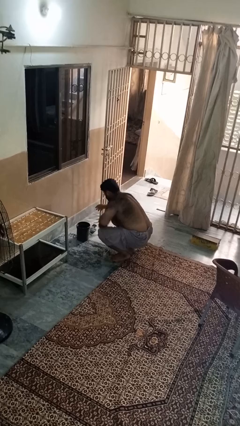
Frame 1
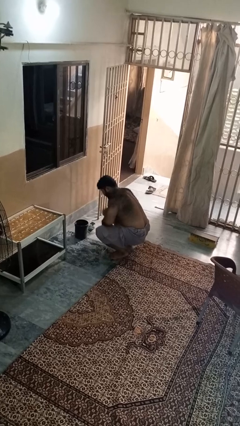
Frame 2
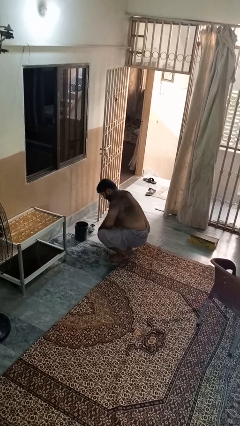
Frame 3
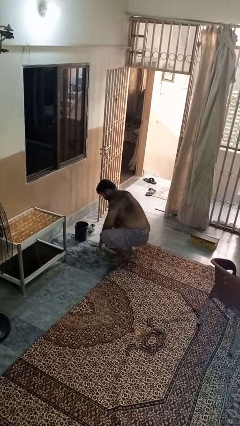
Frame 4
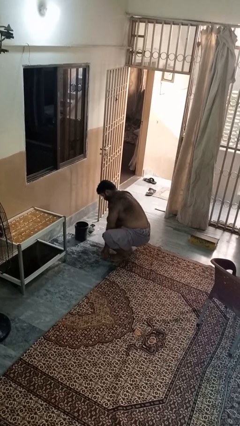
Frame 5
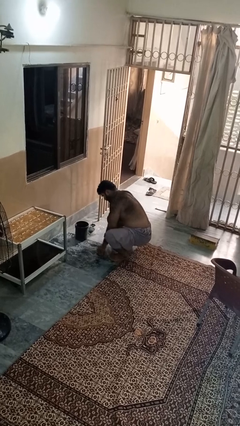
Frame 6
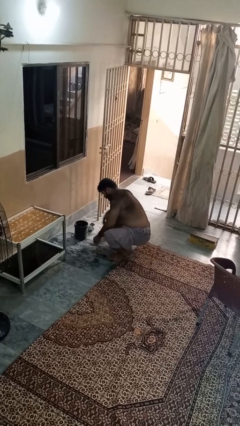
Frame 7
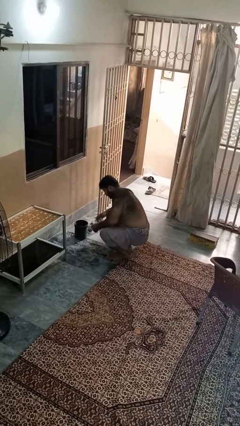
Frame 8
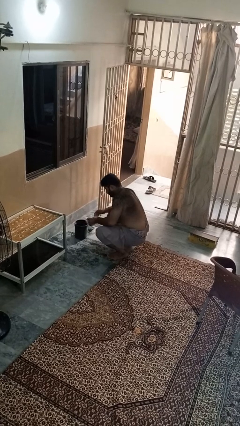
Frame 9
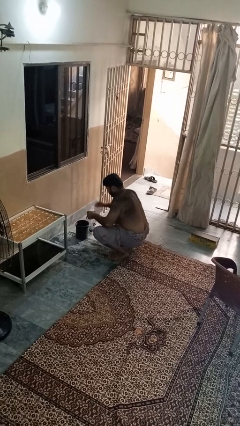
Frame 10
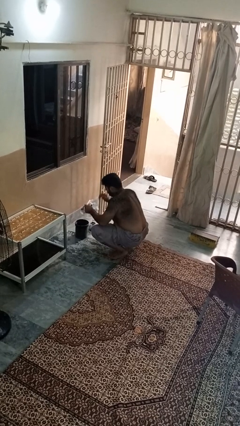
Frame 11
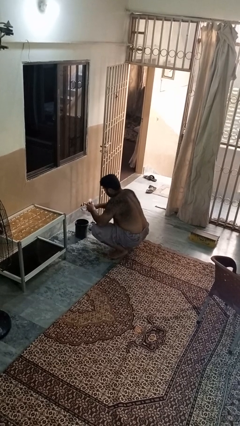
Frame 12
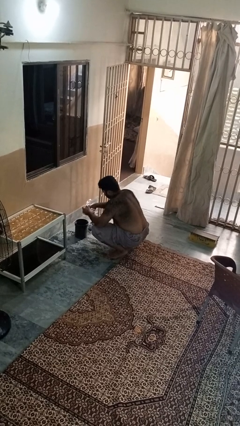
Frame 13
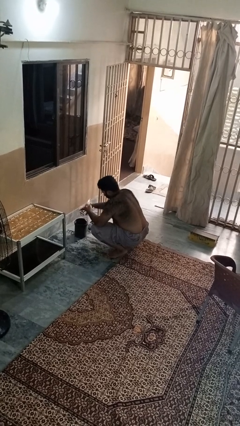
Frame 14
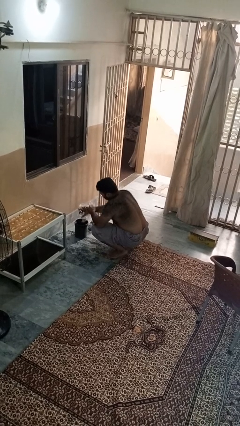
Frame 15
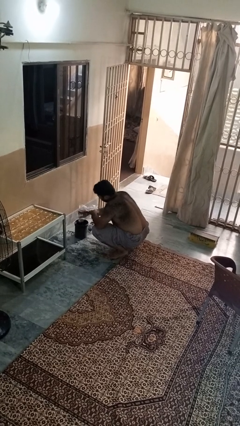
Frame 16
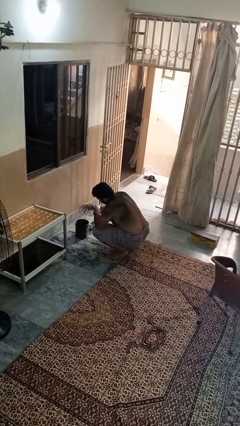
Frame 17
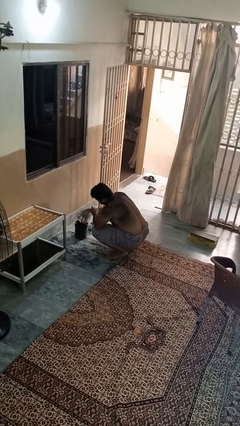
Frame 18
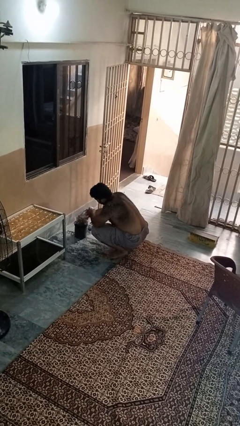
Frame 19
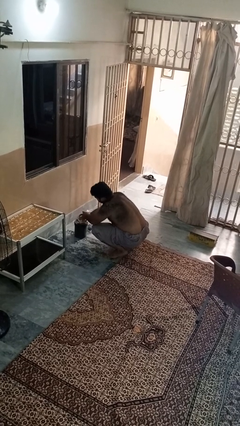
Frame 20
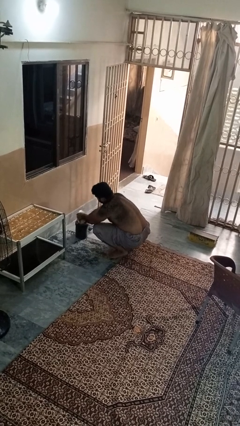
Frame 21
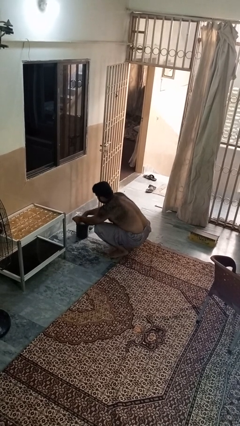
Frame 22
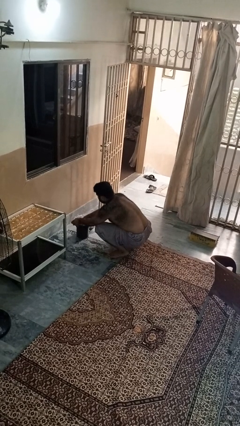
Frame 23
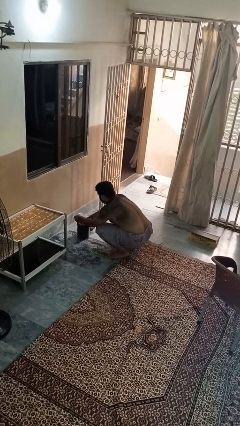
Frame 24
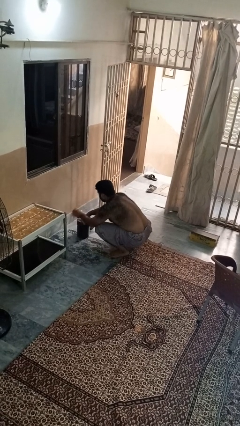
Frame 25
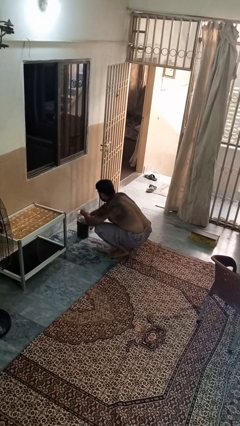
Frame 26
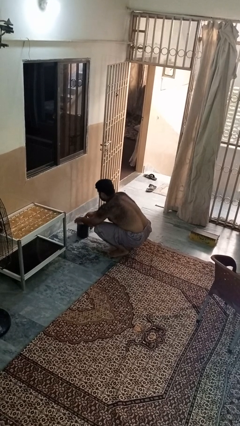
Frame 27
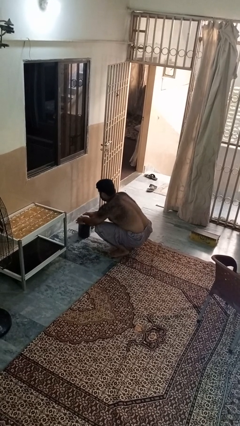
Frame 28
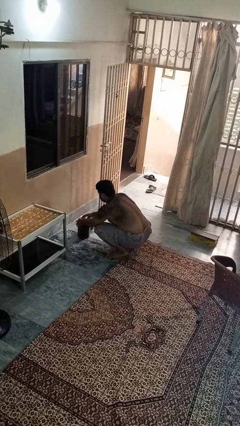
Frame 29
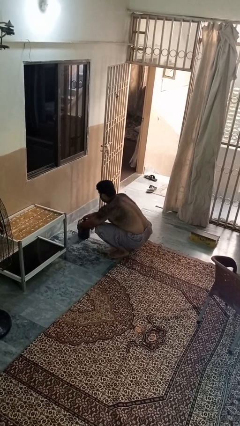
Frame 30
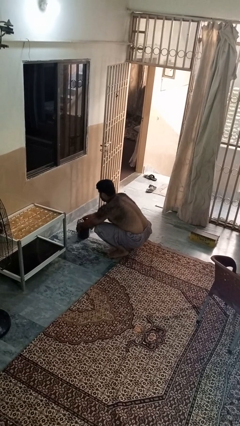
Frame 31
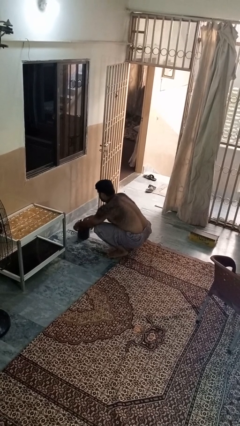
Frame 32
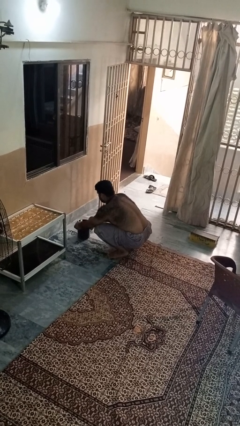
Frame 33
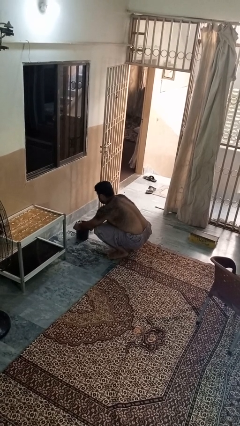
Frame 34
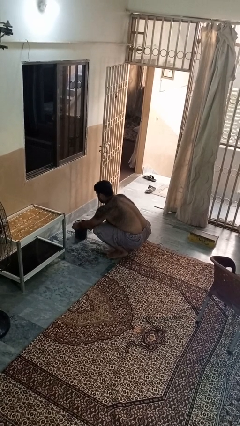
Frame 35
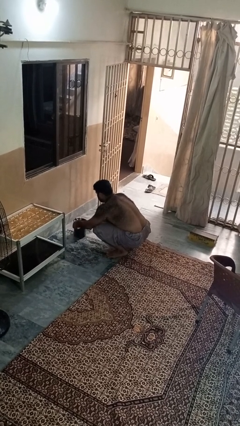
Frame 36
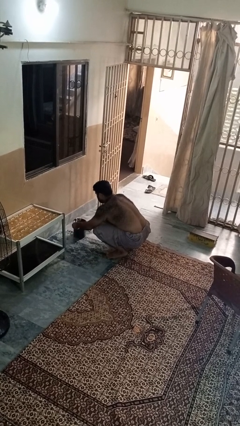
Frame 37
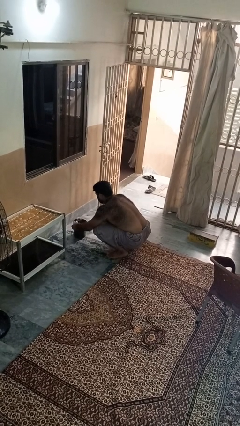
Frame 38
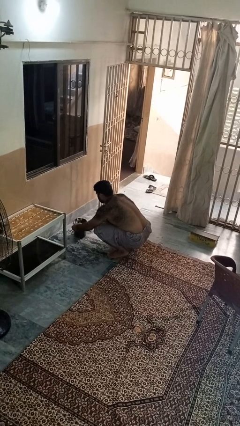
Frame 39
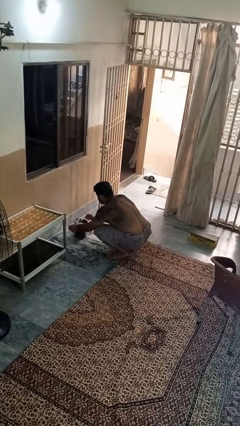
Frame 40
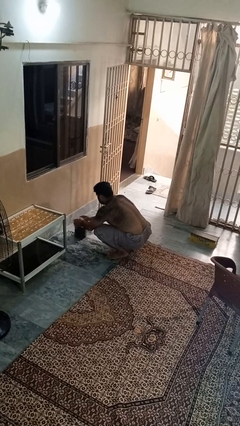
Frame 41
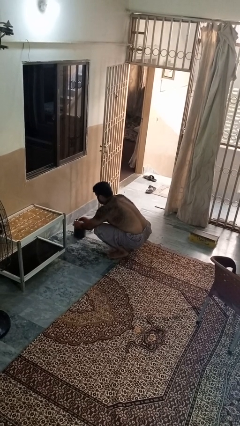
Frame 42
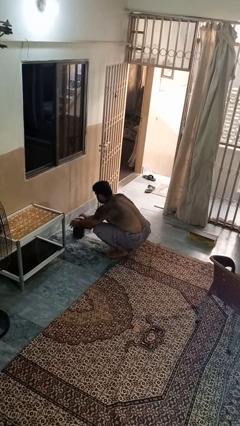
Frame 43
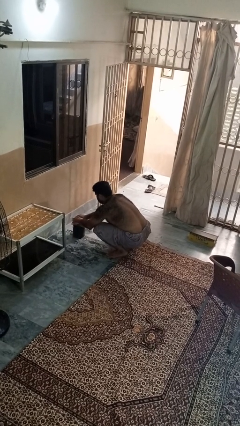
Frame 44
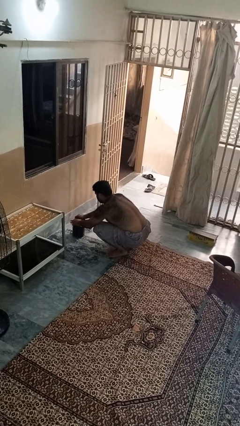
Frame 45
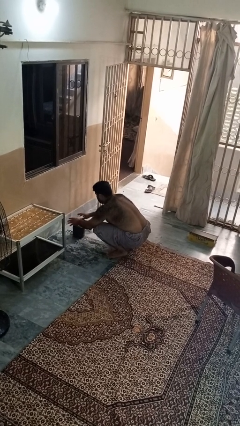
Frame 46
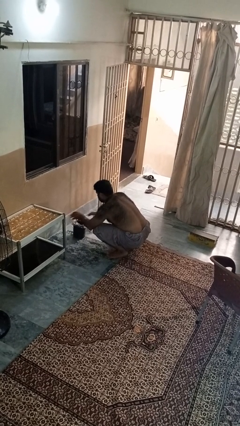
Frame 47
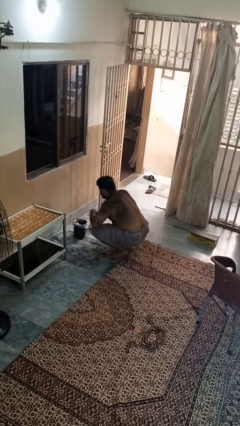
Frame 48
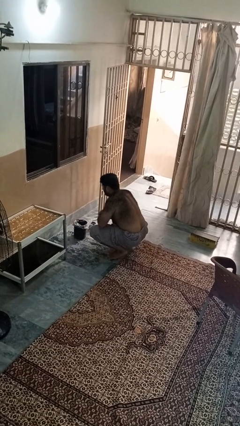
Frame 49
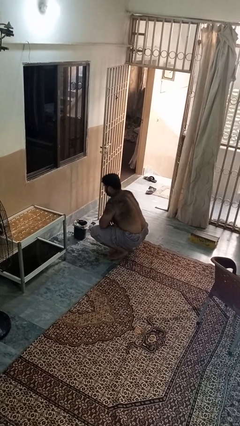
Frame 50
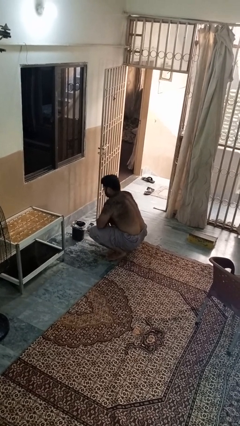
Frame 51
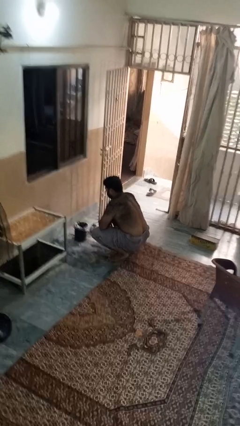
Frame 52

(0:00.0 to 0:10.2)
person inserts trashbag into trashcan

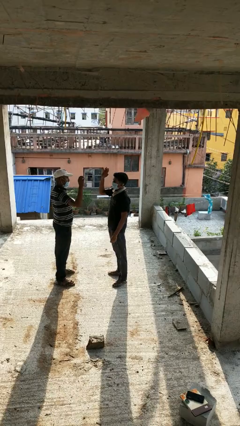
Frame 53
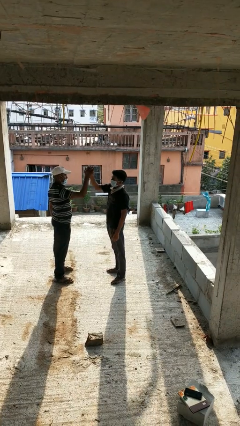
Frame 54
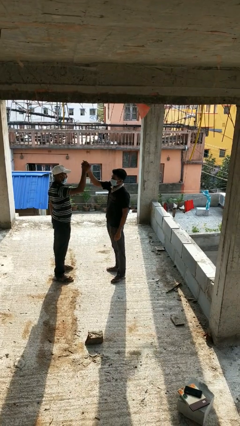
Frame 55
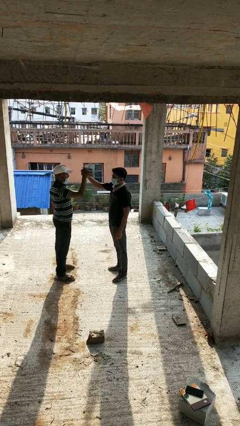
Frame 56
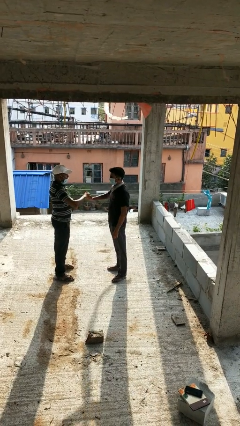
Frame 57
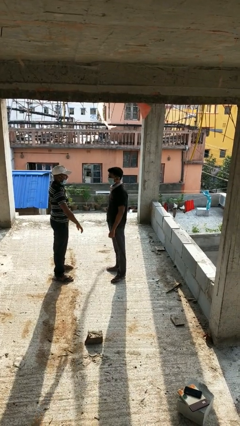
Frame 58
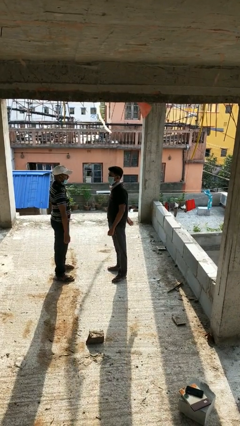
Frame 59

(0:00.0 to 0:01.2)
person highfives hand

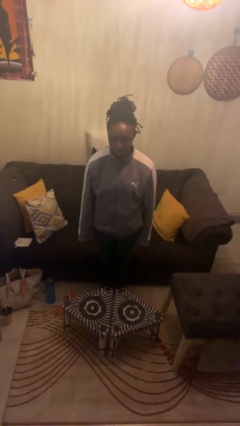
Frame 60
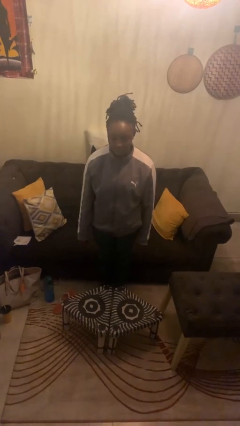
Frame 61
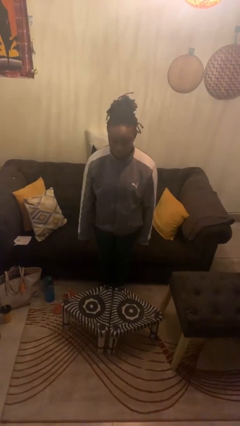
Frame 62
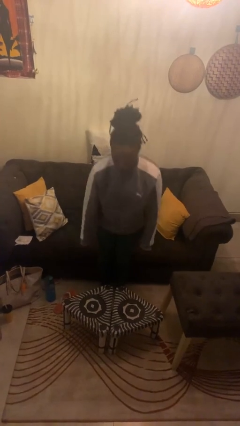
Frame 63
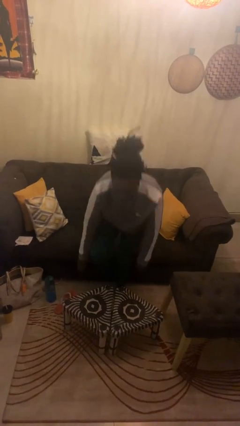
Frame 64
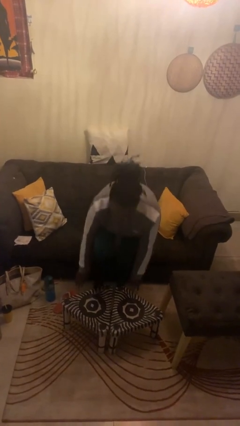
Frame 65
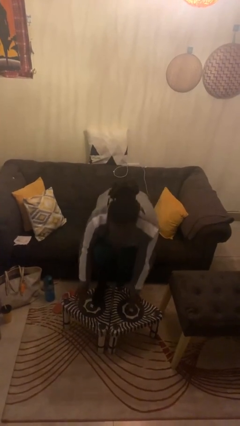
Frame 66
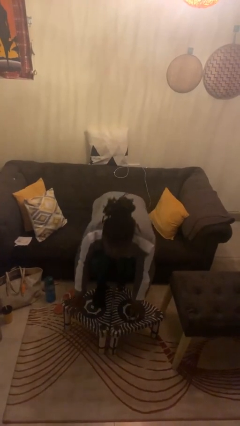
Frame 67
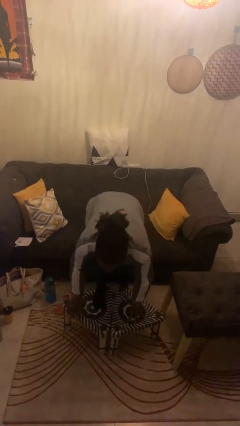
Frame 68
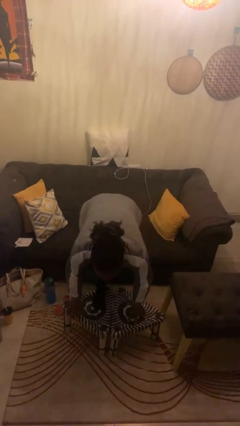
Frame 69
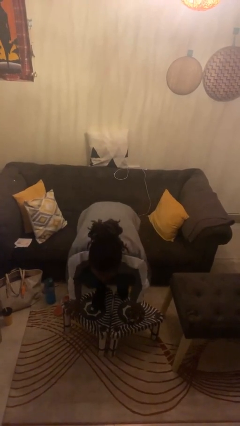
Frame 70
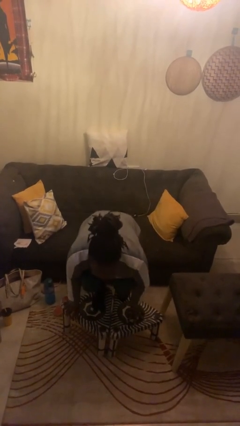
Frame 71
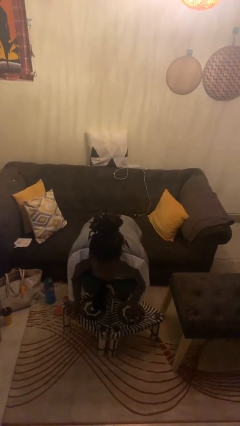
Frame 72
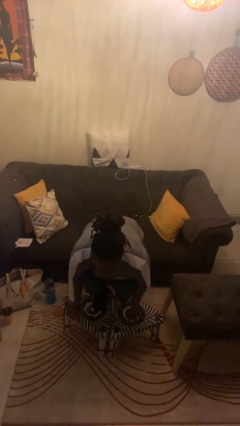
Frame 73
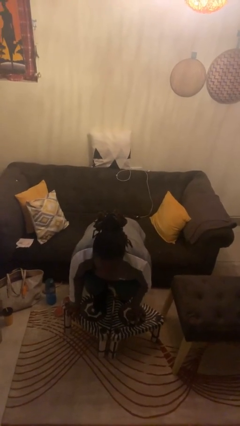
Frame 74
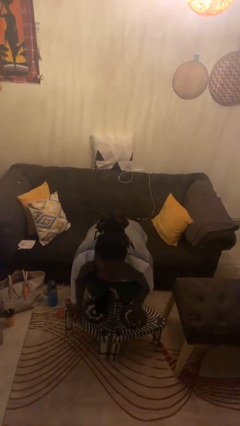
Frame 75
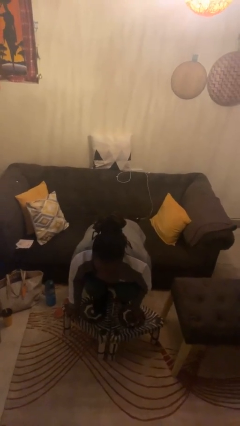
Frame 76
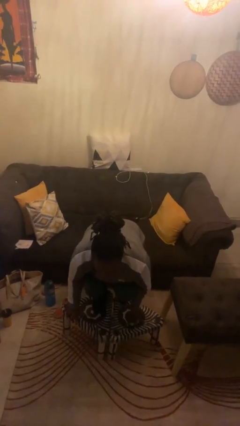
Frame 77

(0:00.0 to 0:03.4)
person climbs on table

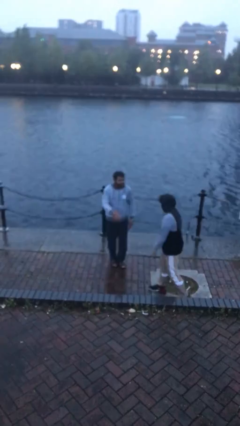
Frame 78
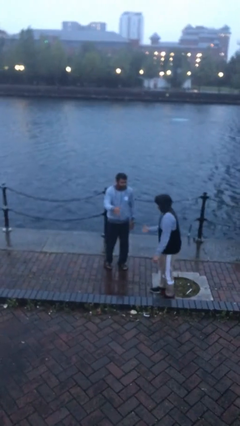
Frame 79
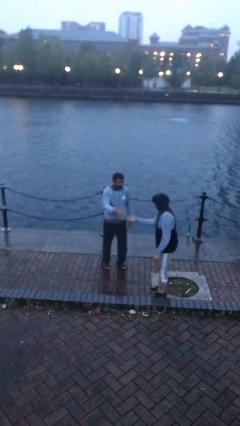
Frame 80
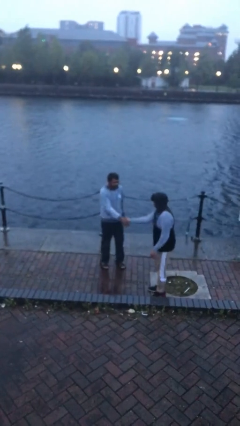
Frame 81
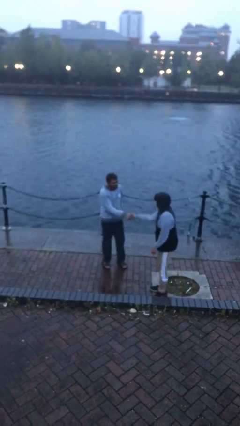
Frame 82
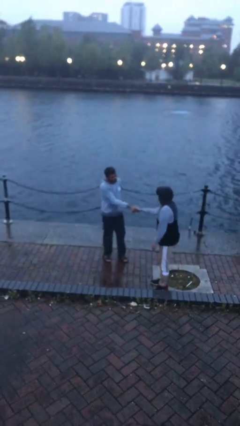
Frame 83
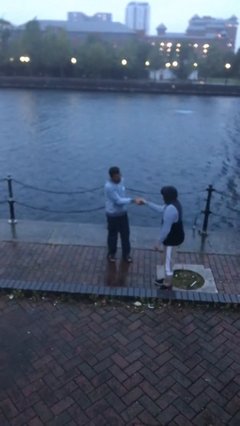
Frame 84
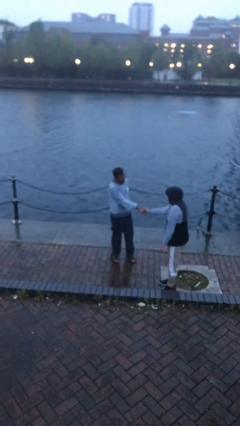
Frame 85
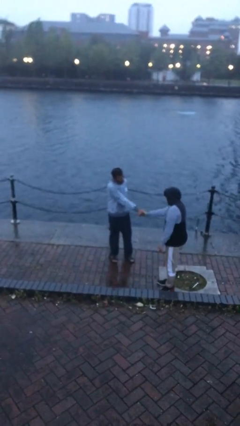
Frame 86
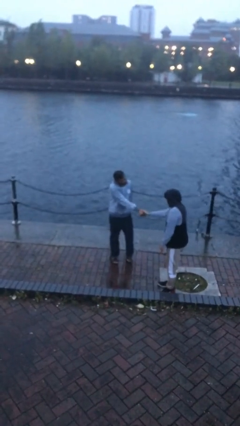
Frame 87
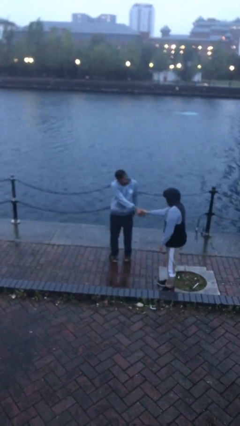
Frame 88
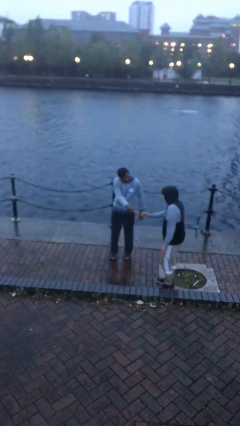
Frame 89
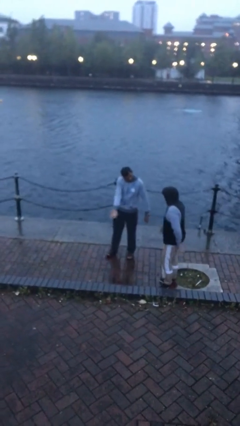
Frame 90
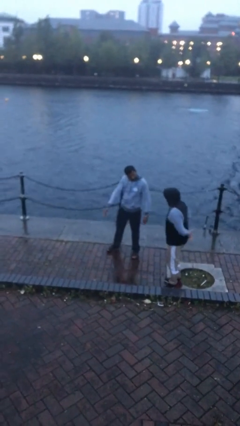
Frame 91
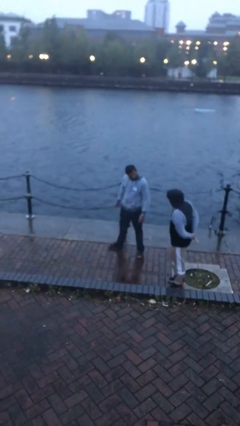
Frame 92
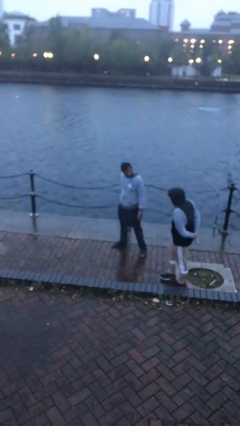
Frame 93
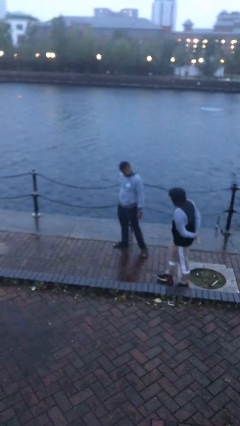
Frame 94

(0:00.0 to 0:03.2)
person shakes hand
